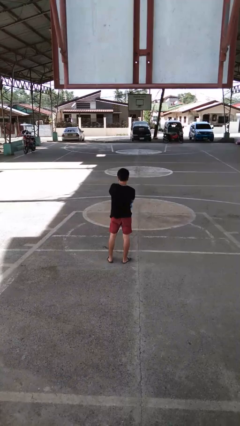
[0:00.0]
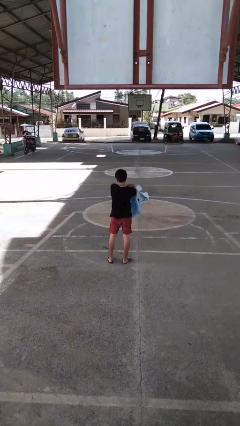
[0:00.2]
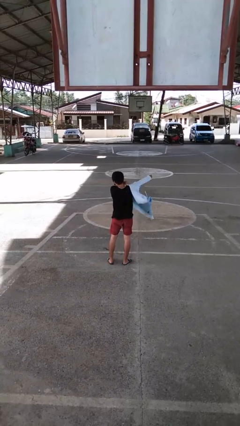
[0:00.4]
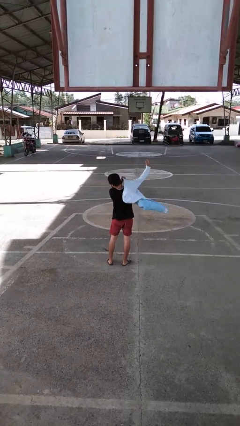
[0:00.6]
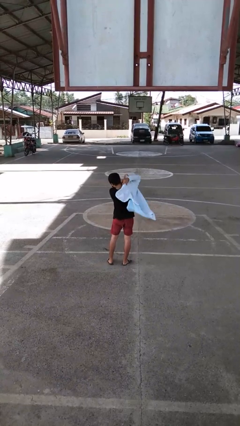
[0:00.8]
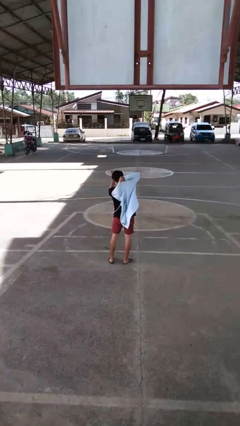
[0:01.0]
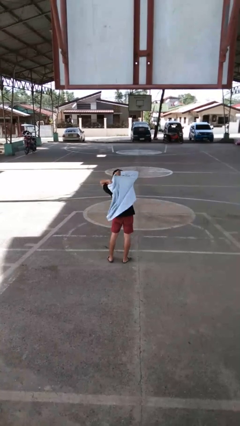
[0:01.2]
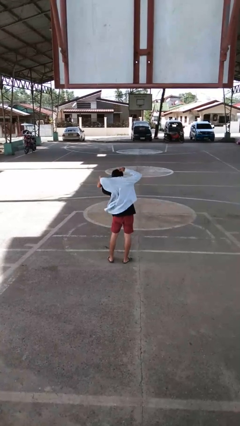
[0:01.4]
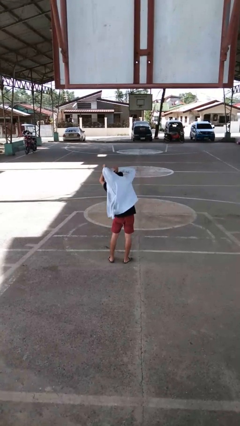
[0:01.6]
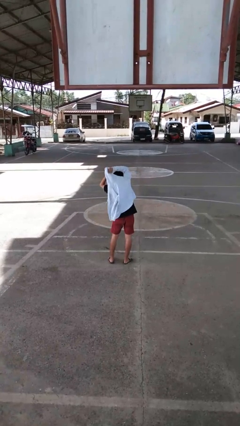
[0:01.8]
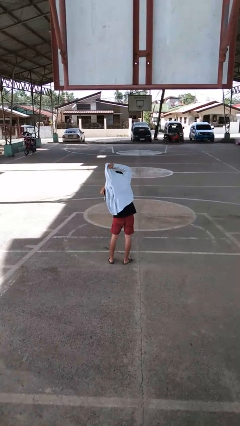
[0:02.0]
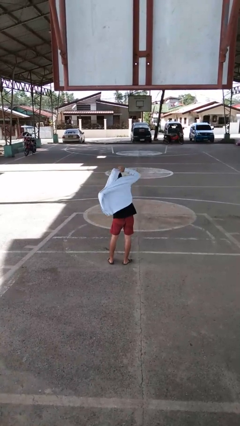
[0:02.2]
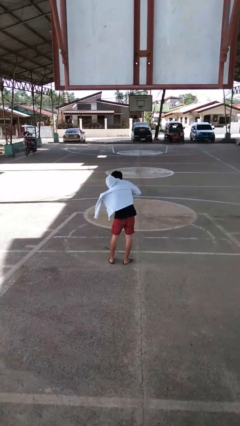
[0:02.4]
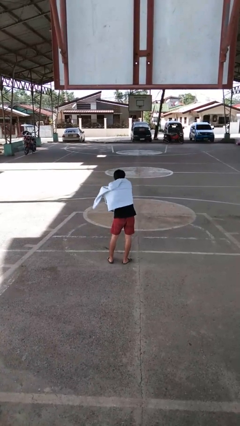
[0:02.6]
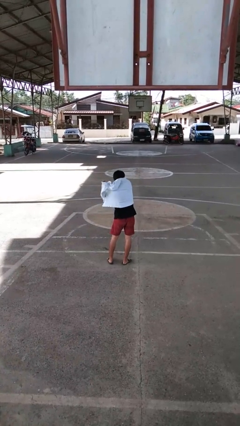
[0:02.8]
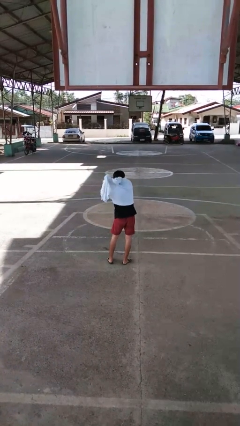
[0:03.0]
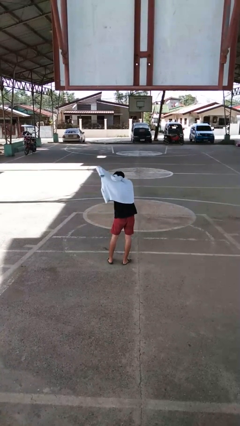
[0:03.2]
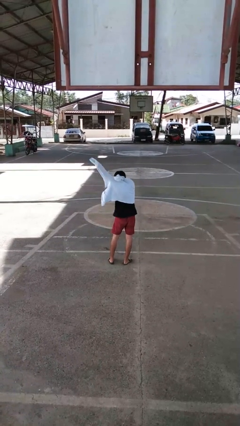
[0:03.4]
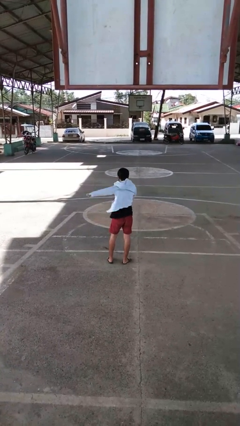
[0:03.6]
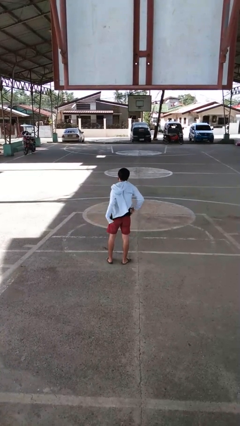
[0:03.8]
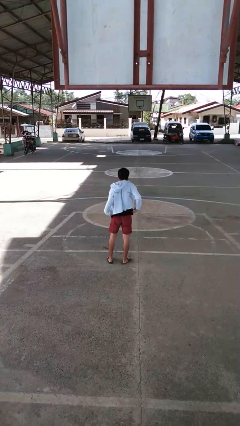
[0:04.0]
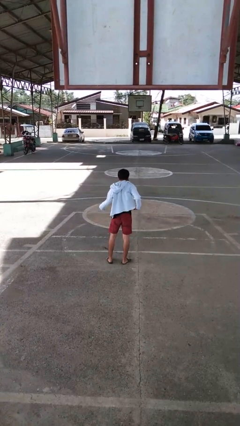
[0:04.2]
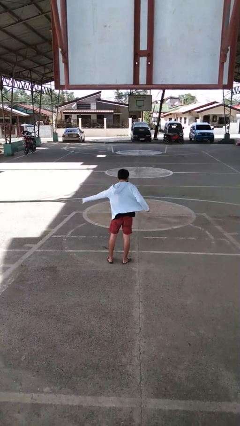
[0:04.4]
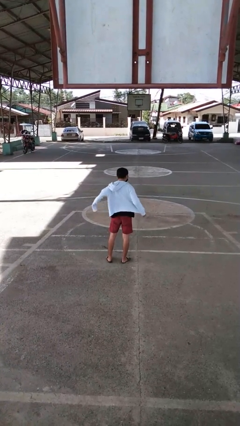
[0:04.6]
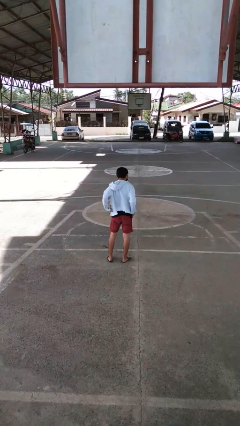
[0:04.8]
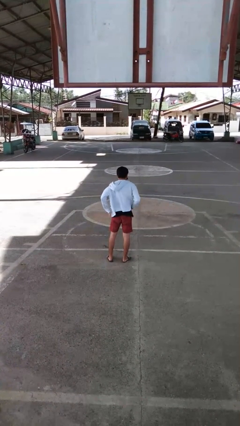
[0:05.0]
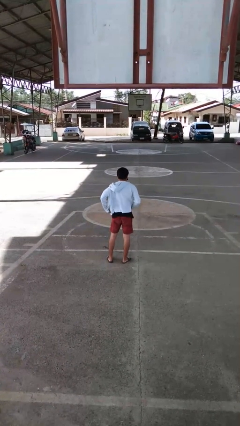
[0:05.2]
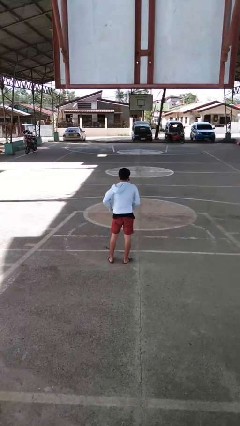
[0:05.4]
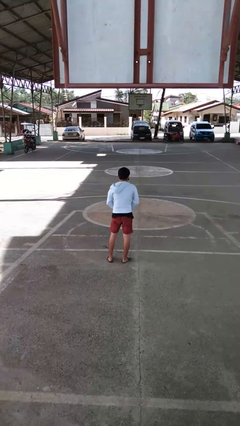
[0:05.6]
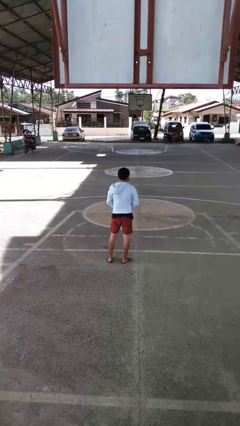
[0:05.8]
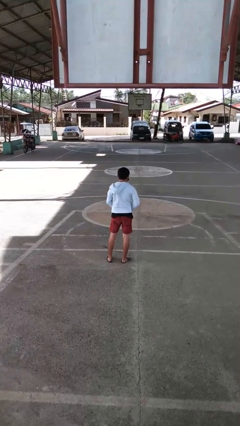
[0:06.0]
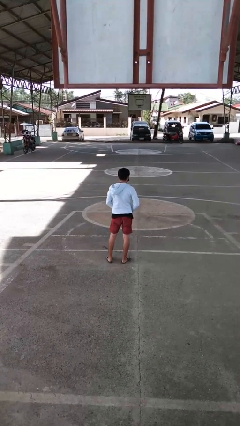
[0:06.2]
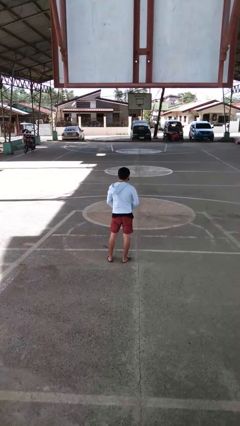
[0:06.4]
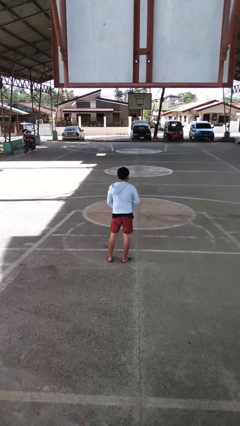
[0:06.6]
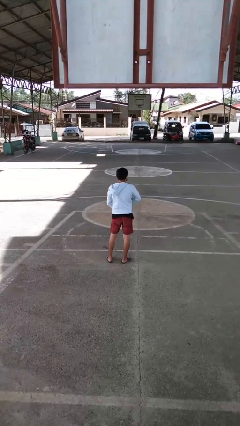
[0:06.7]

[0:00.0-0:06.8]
person puts on jacket

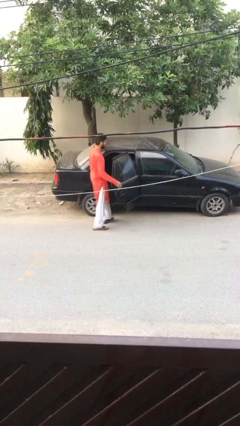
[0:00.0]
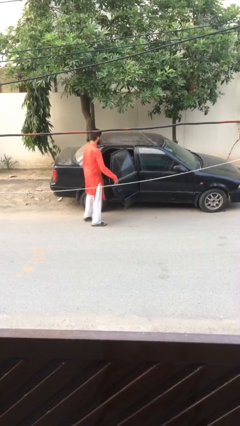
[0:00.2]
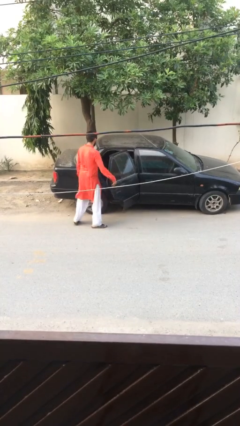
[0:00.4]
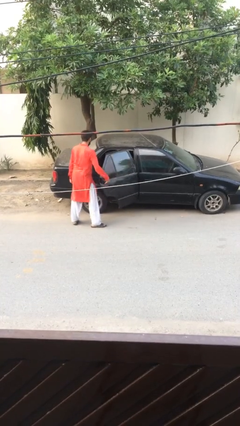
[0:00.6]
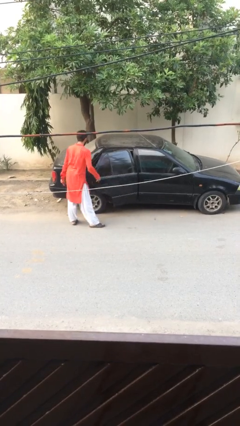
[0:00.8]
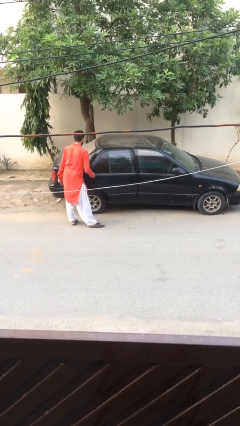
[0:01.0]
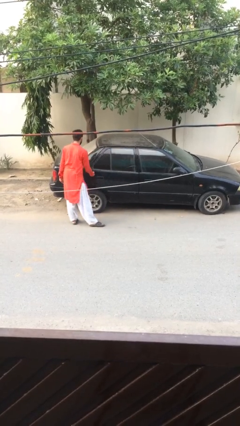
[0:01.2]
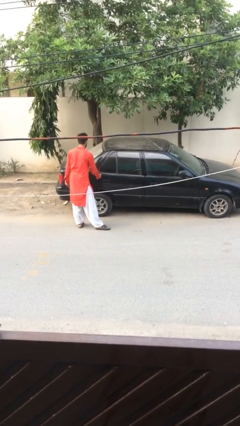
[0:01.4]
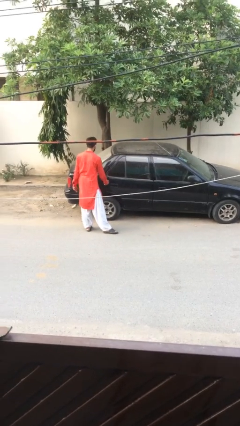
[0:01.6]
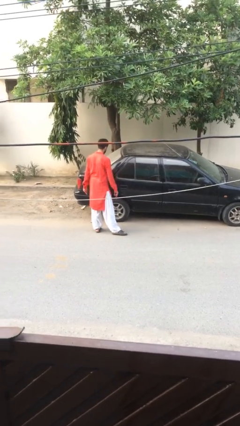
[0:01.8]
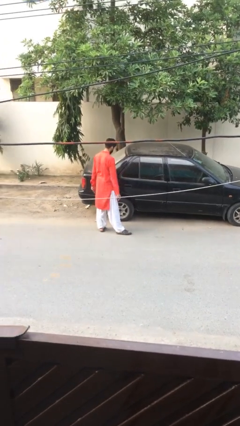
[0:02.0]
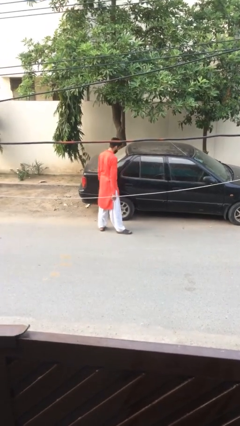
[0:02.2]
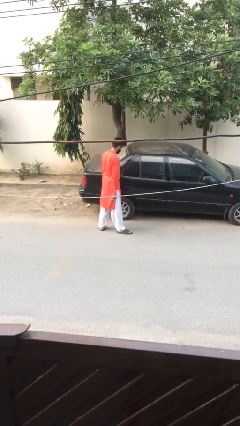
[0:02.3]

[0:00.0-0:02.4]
person closes car door

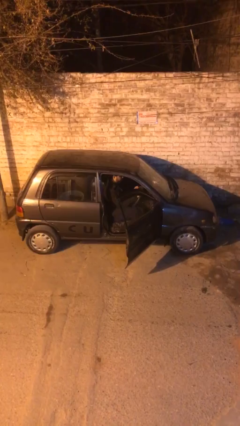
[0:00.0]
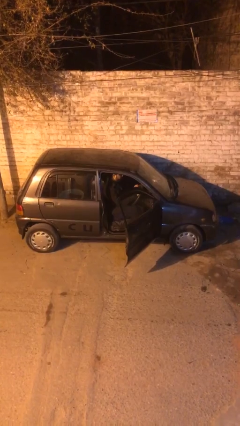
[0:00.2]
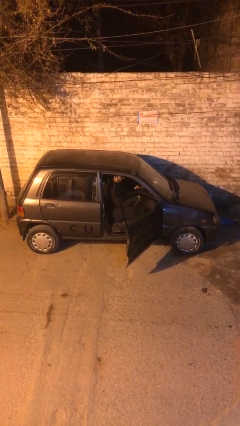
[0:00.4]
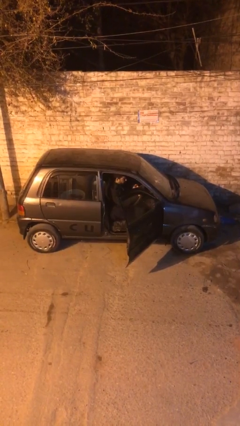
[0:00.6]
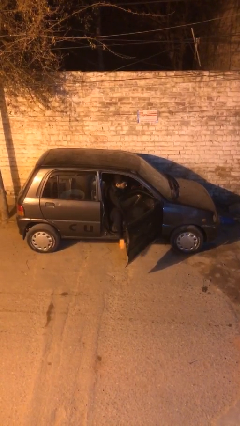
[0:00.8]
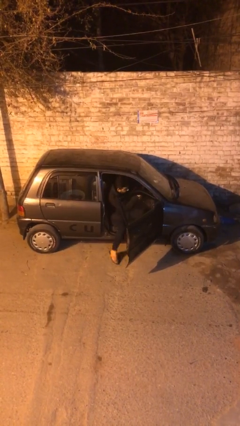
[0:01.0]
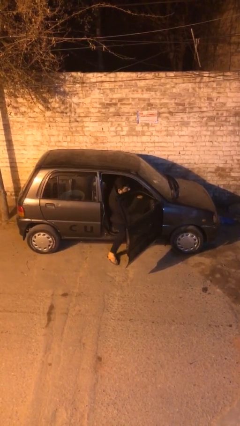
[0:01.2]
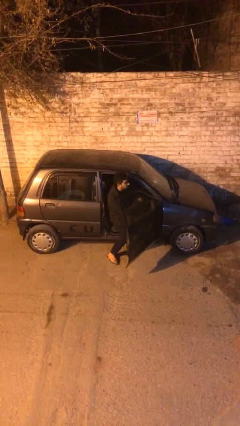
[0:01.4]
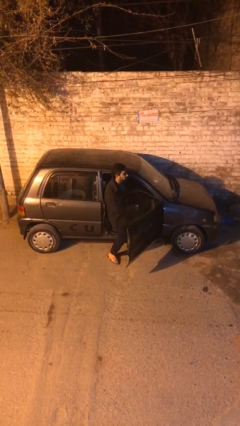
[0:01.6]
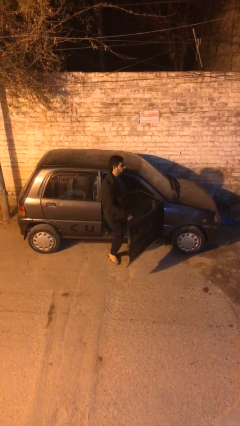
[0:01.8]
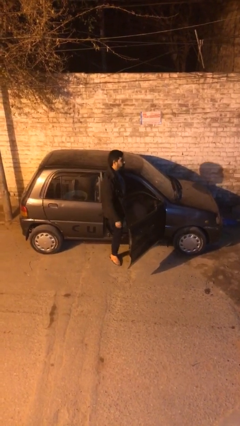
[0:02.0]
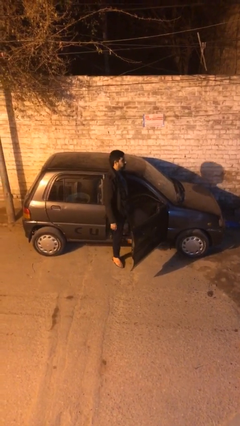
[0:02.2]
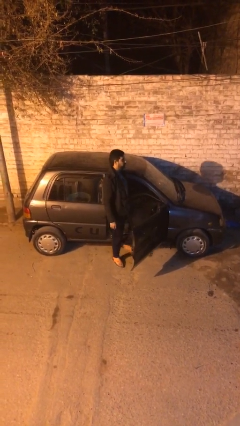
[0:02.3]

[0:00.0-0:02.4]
person exits car

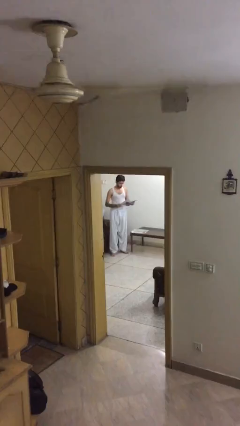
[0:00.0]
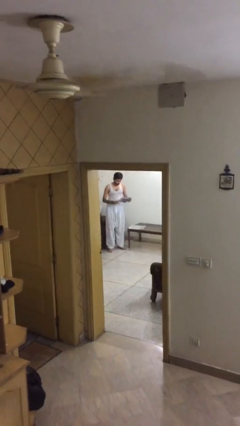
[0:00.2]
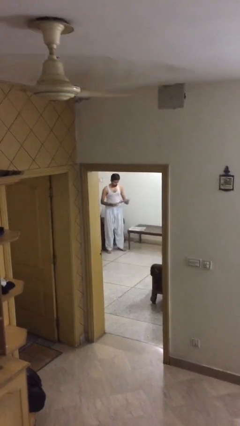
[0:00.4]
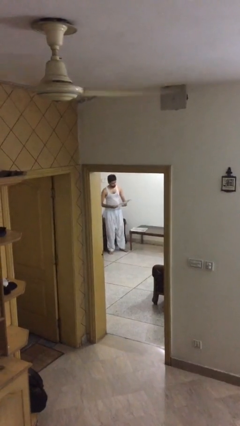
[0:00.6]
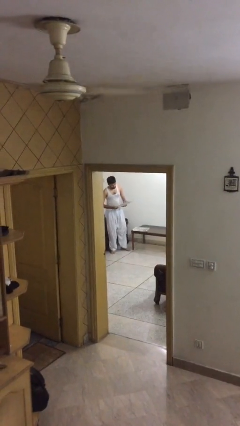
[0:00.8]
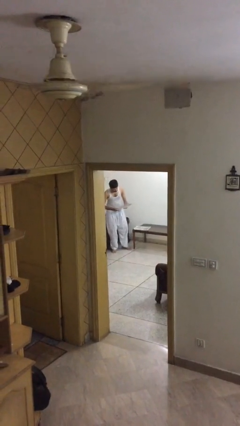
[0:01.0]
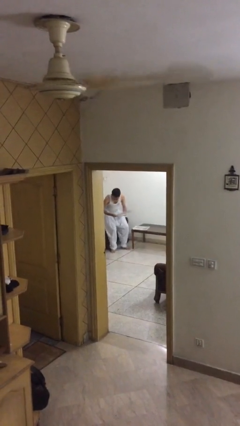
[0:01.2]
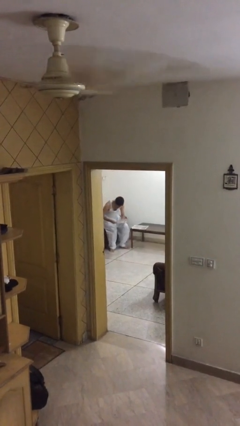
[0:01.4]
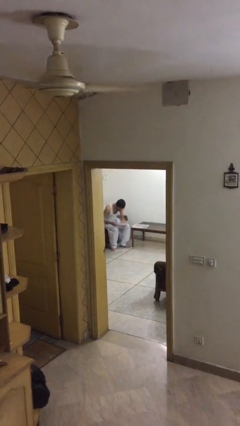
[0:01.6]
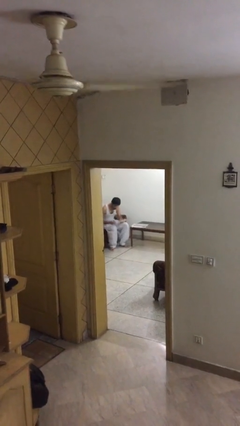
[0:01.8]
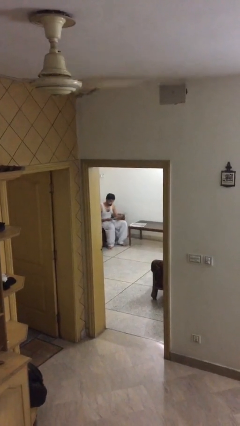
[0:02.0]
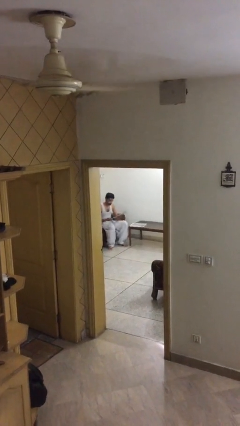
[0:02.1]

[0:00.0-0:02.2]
person sits down

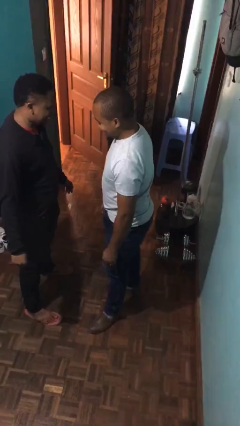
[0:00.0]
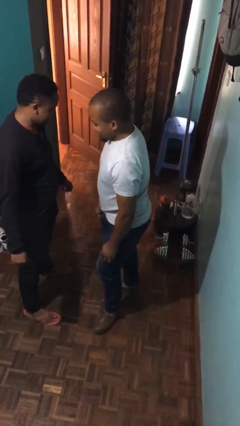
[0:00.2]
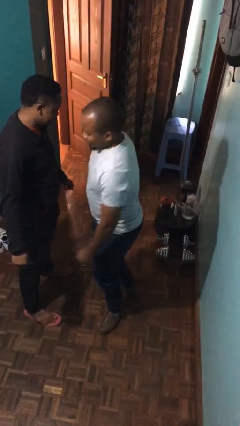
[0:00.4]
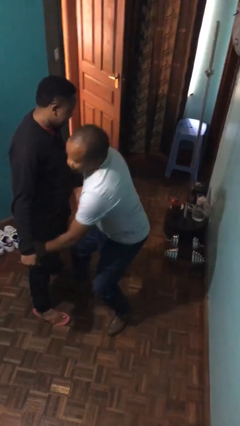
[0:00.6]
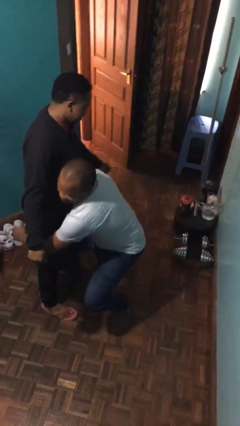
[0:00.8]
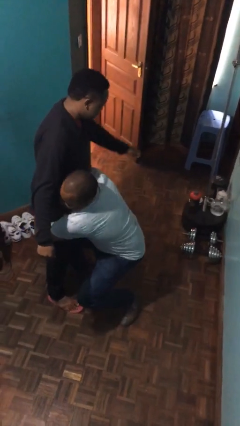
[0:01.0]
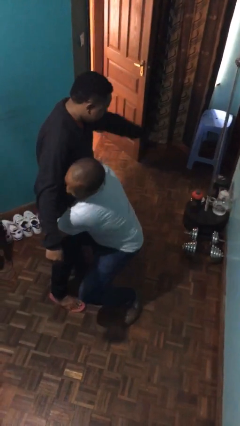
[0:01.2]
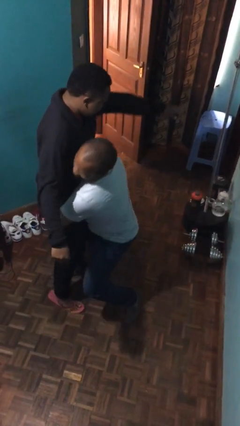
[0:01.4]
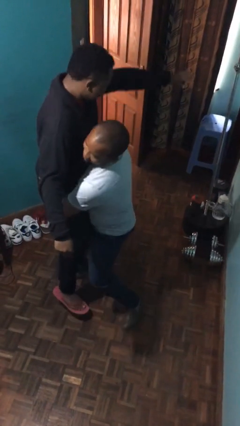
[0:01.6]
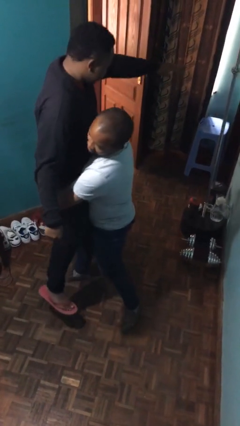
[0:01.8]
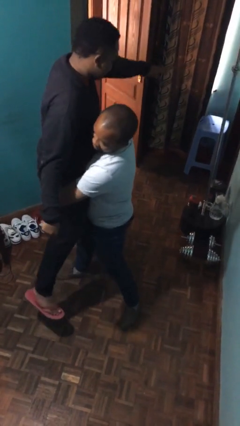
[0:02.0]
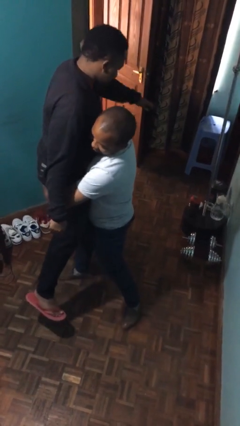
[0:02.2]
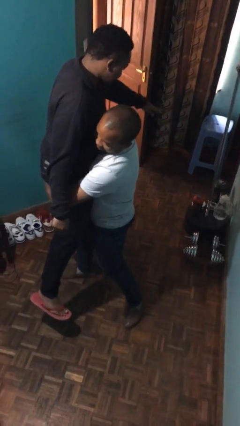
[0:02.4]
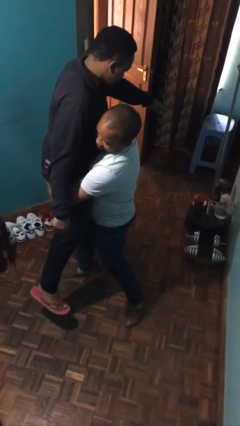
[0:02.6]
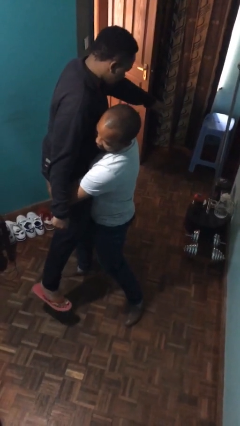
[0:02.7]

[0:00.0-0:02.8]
person picks up person

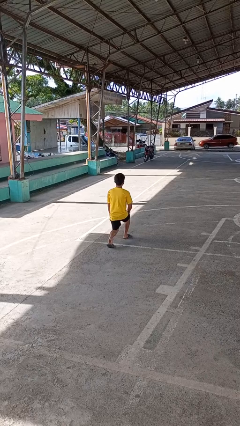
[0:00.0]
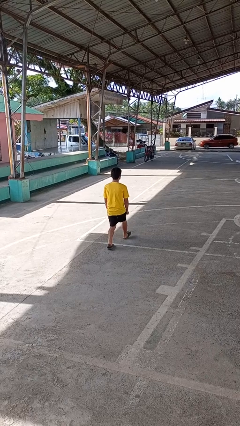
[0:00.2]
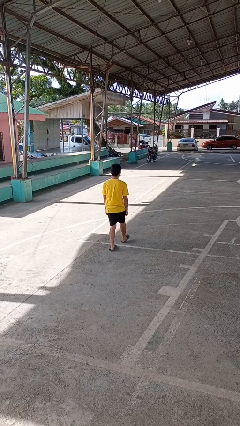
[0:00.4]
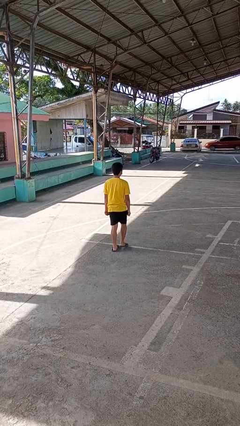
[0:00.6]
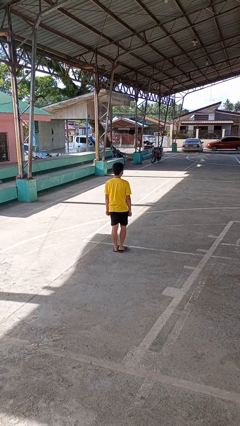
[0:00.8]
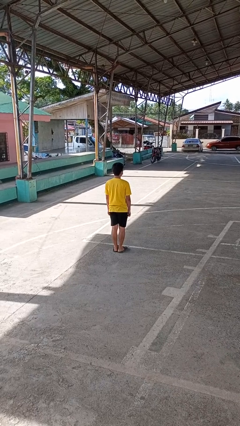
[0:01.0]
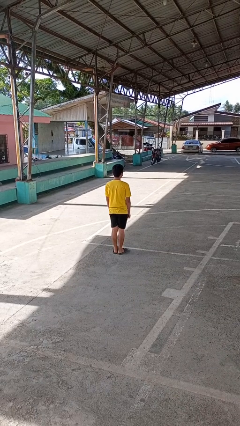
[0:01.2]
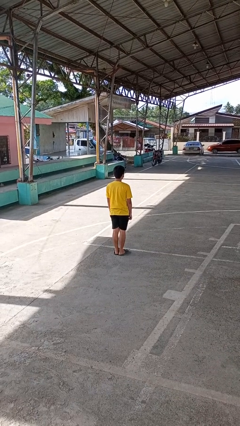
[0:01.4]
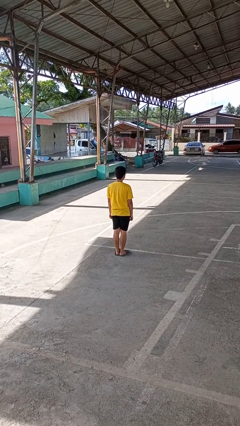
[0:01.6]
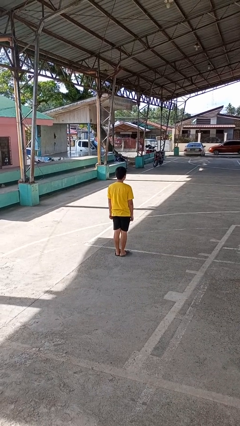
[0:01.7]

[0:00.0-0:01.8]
person stands up from floor
